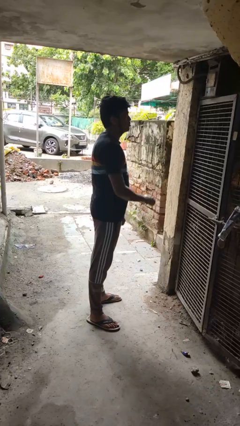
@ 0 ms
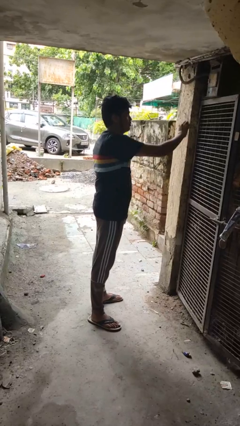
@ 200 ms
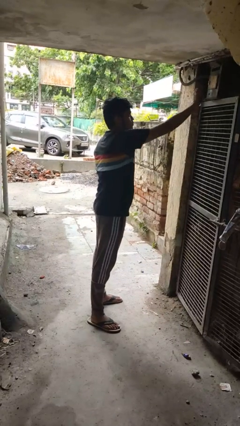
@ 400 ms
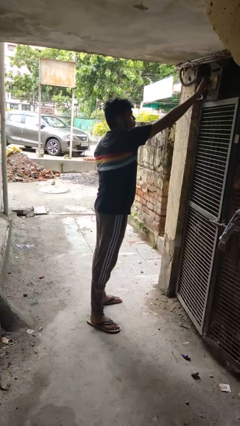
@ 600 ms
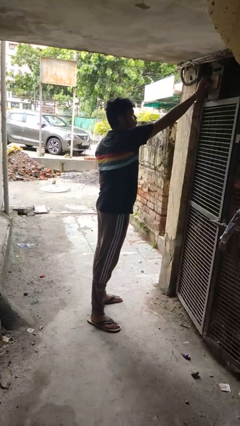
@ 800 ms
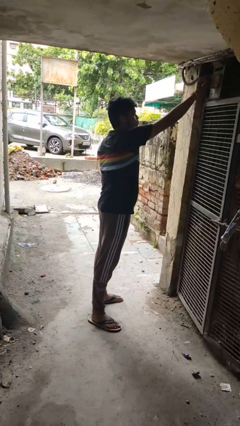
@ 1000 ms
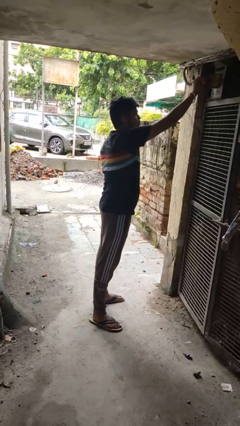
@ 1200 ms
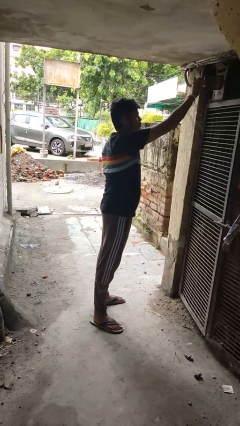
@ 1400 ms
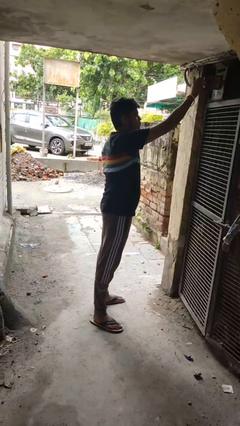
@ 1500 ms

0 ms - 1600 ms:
person opens mailbox

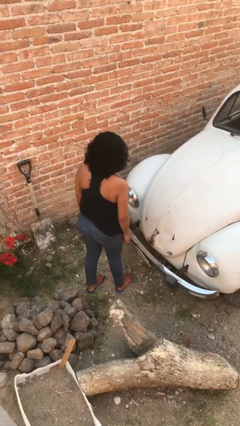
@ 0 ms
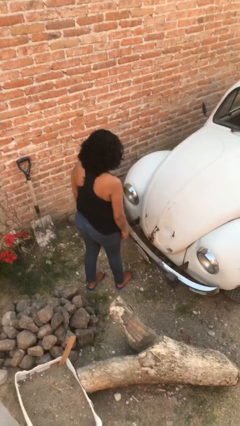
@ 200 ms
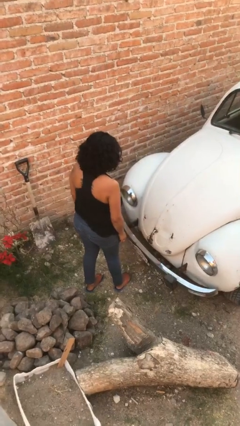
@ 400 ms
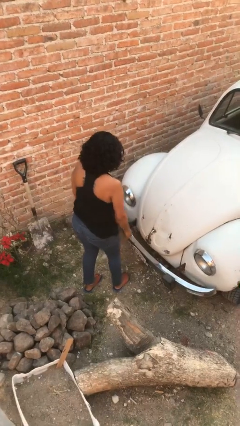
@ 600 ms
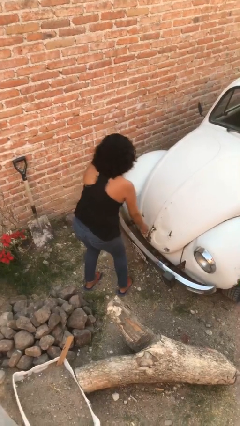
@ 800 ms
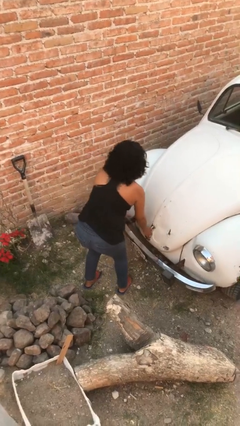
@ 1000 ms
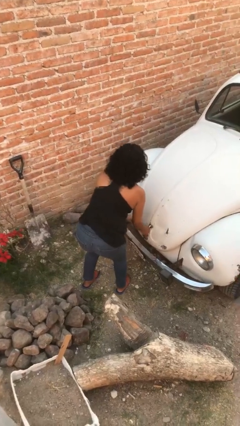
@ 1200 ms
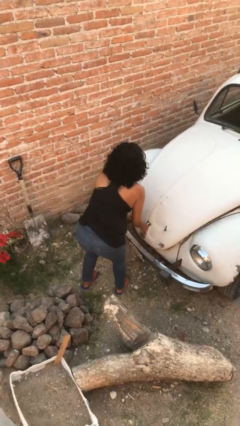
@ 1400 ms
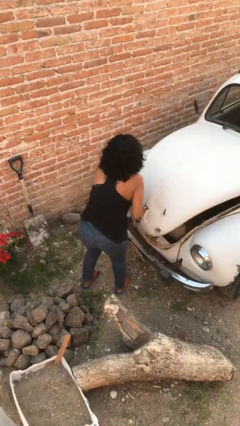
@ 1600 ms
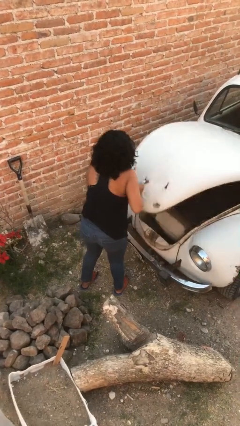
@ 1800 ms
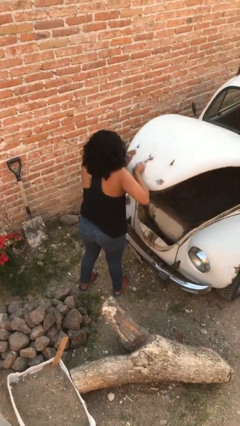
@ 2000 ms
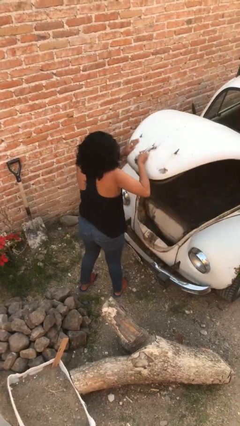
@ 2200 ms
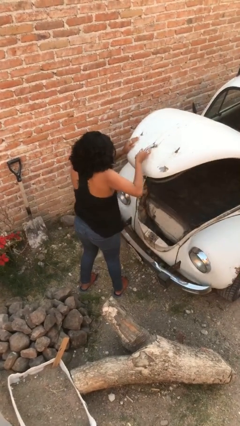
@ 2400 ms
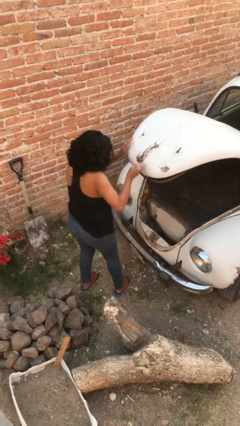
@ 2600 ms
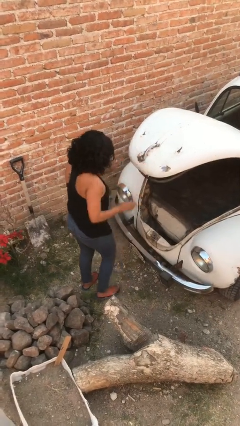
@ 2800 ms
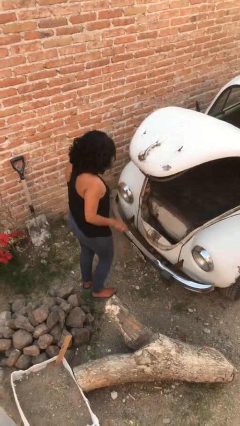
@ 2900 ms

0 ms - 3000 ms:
person opens car trunk

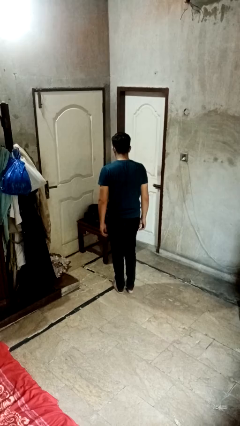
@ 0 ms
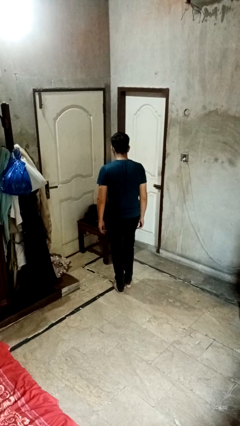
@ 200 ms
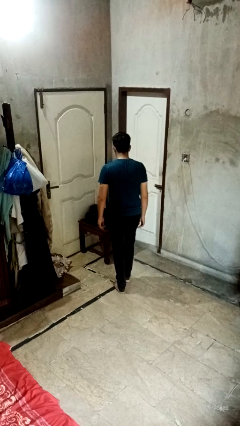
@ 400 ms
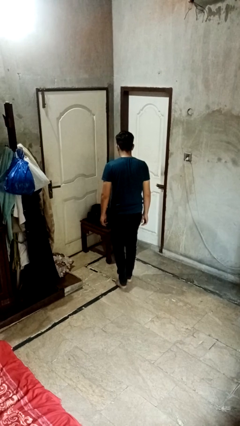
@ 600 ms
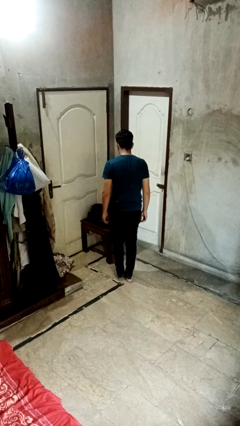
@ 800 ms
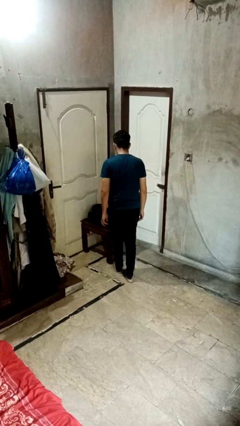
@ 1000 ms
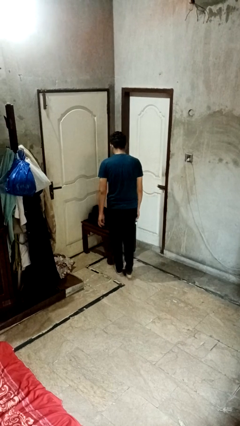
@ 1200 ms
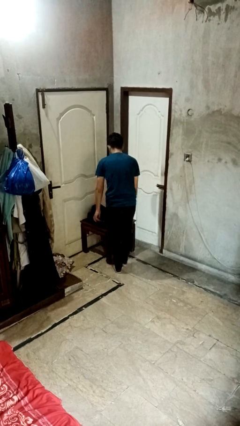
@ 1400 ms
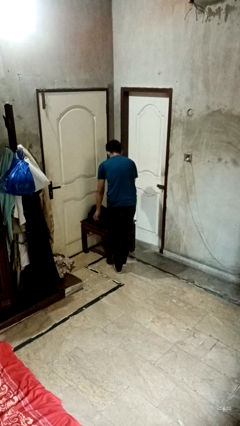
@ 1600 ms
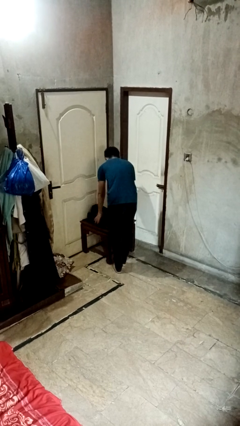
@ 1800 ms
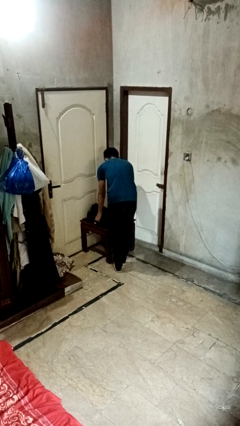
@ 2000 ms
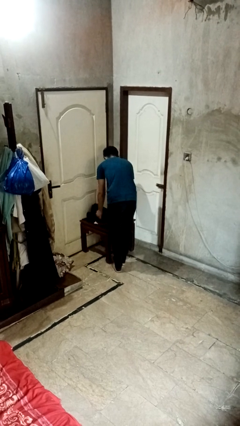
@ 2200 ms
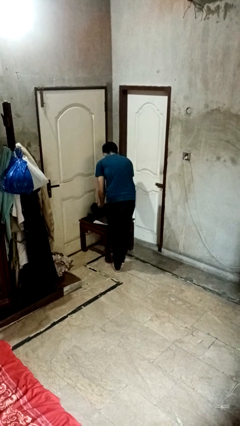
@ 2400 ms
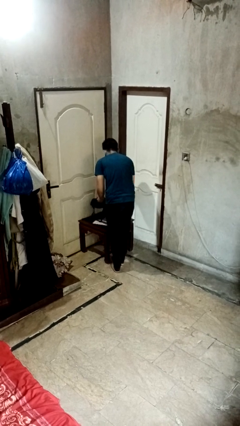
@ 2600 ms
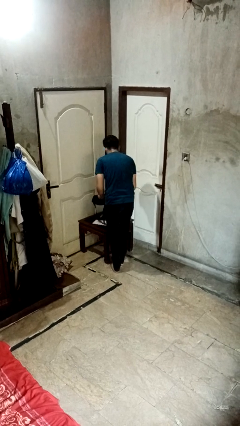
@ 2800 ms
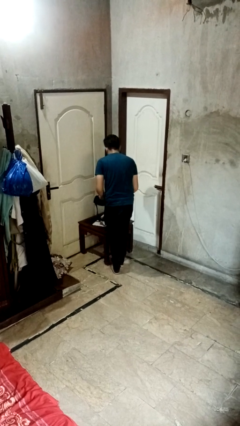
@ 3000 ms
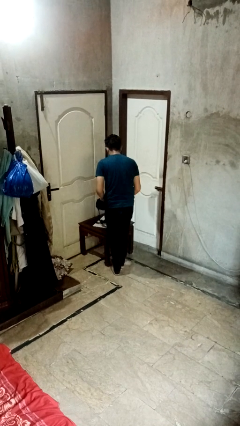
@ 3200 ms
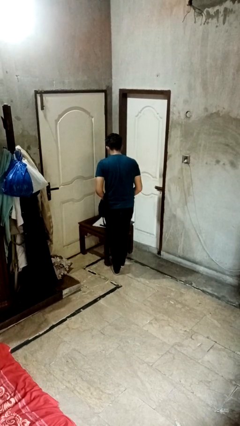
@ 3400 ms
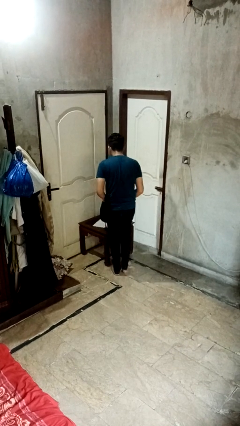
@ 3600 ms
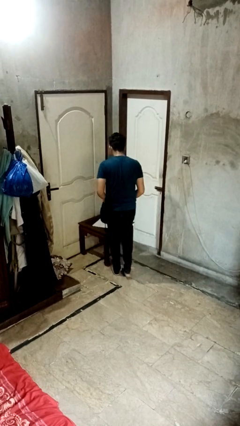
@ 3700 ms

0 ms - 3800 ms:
person picks up object from table

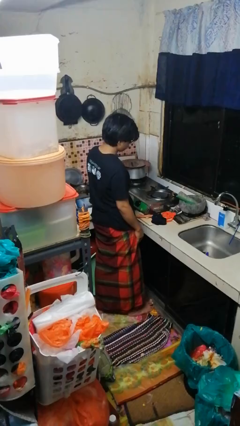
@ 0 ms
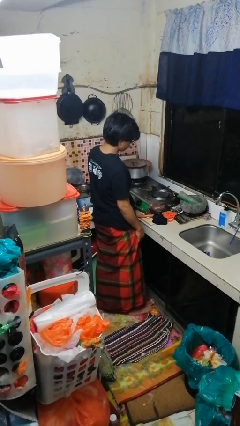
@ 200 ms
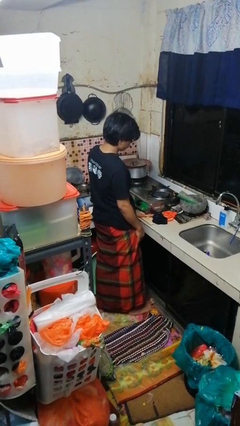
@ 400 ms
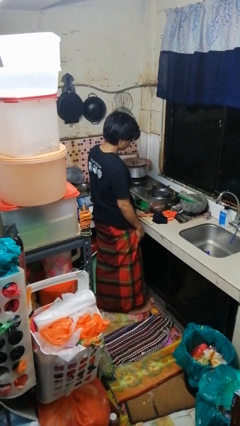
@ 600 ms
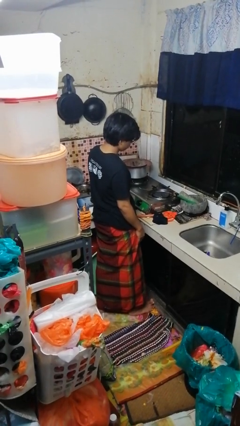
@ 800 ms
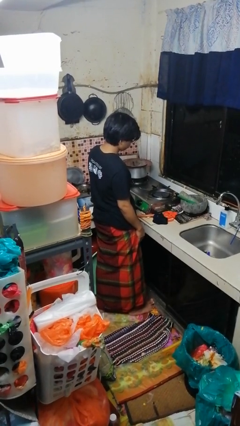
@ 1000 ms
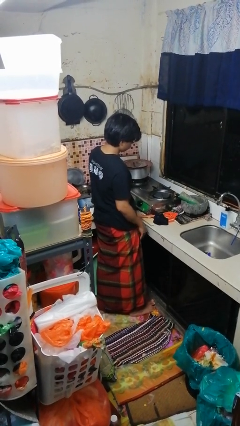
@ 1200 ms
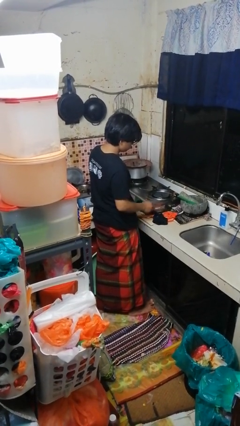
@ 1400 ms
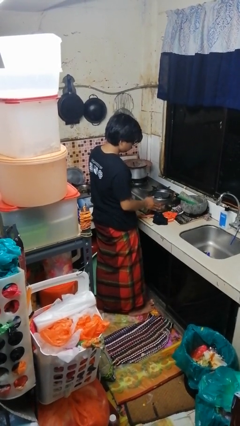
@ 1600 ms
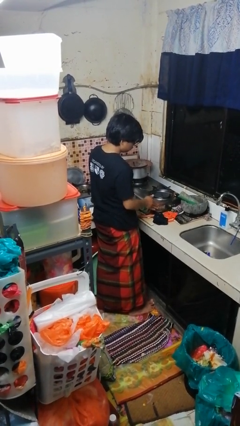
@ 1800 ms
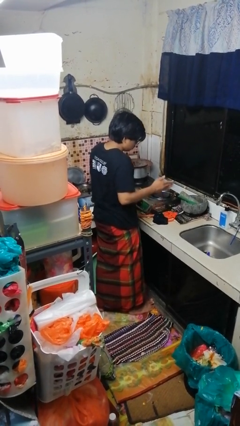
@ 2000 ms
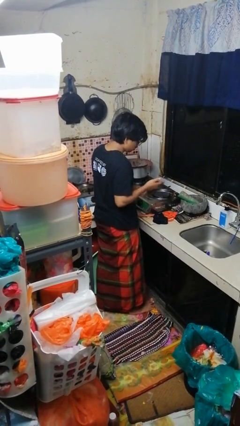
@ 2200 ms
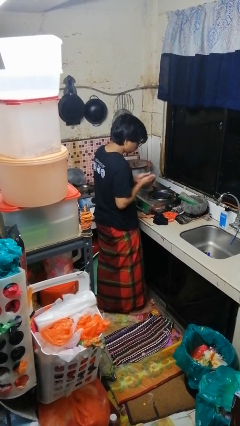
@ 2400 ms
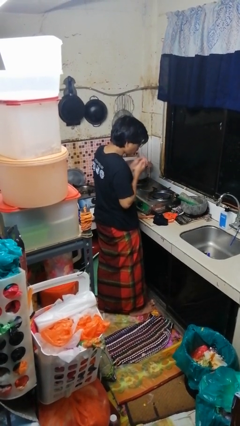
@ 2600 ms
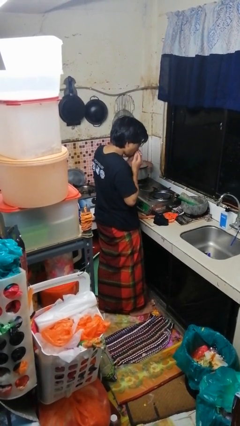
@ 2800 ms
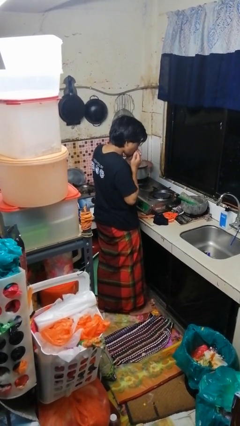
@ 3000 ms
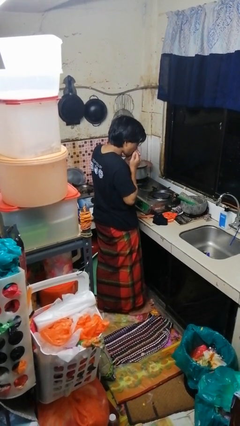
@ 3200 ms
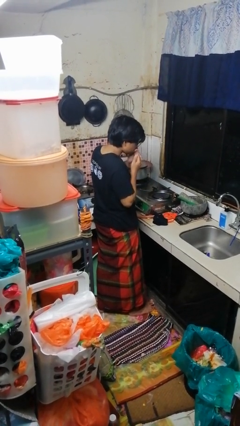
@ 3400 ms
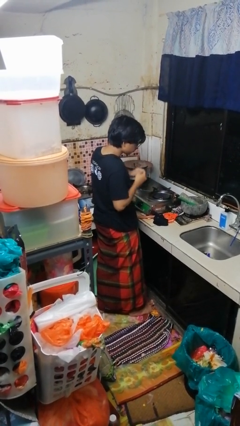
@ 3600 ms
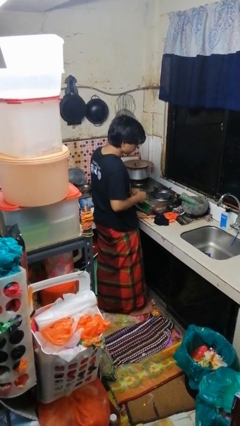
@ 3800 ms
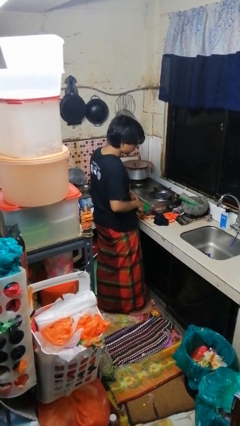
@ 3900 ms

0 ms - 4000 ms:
person burns hand

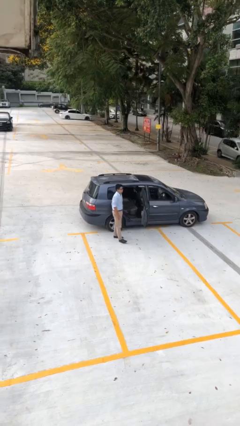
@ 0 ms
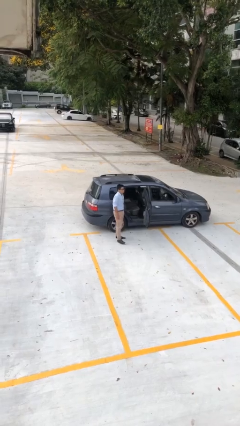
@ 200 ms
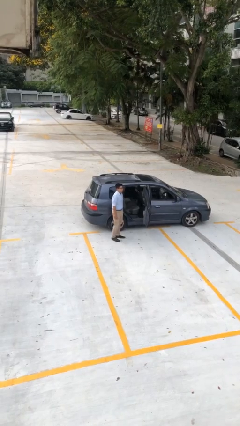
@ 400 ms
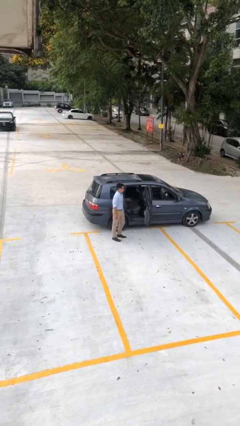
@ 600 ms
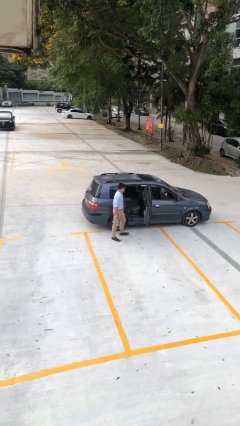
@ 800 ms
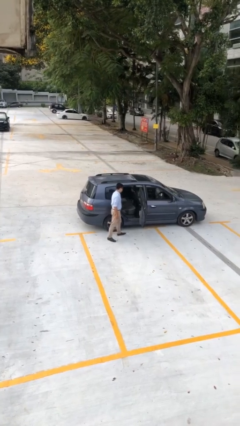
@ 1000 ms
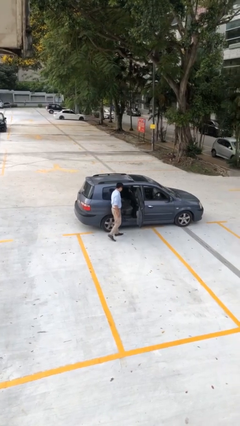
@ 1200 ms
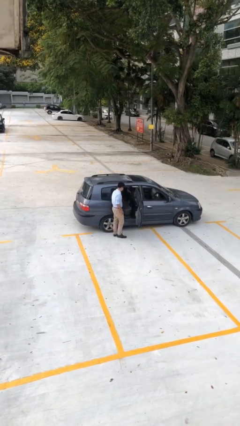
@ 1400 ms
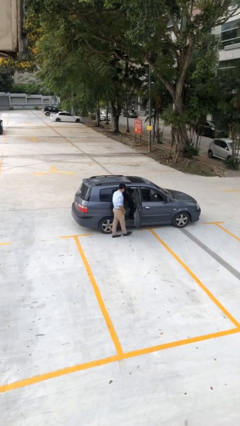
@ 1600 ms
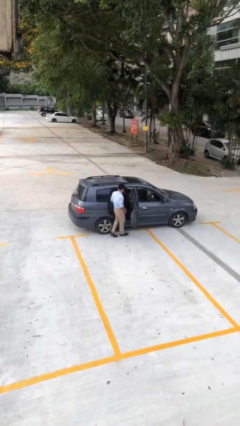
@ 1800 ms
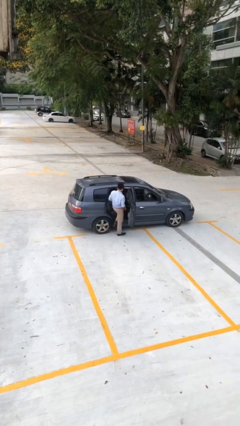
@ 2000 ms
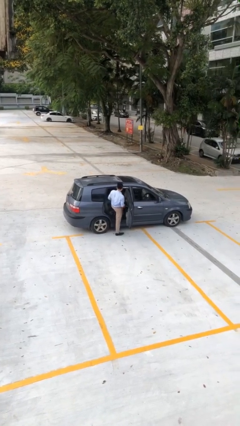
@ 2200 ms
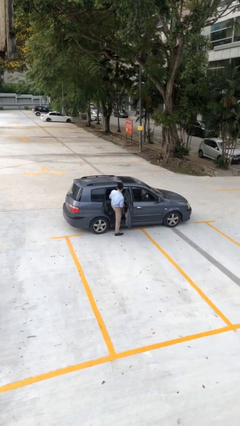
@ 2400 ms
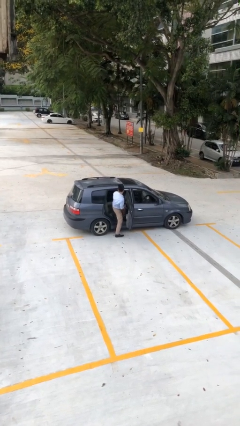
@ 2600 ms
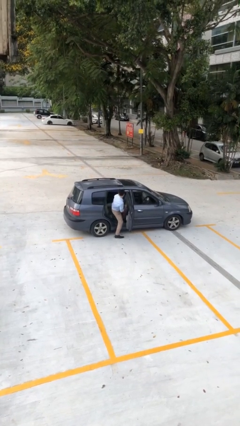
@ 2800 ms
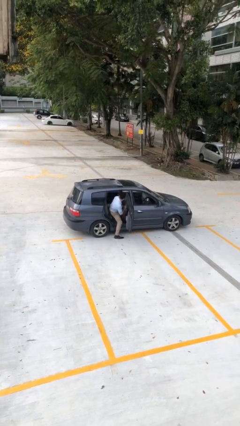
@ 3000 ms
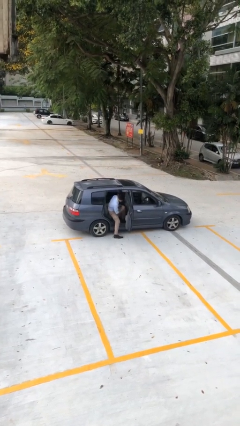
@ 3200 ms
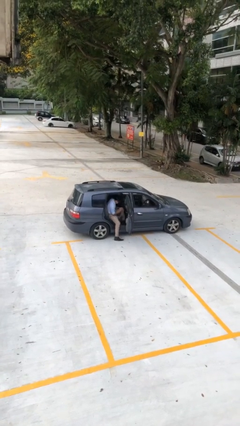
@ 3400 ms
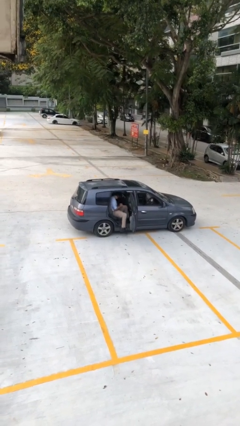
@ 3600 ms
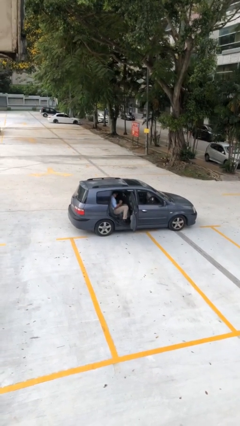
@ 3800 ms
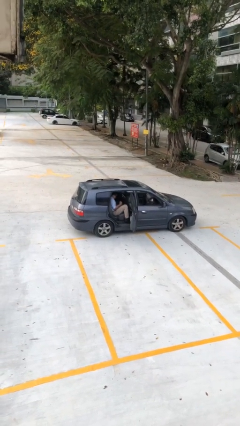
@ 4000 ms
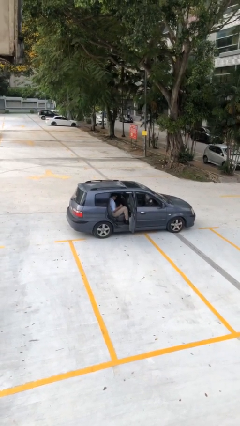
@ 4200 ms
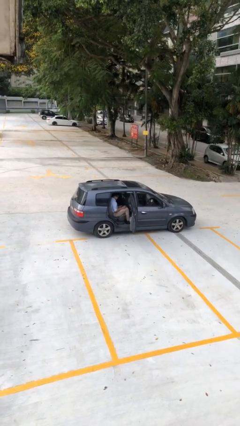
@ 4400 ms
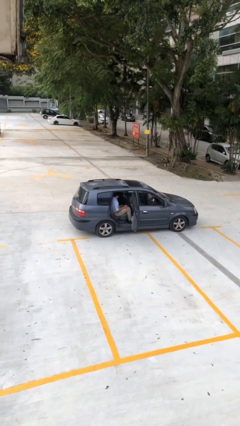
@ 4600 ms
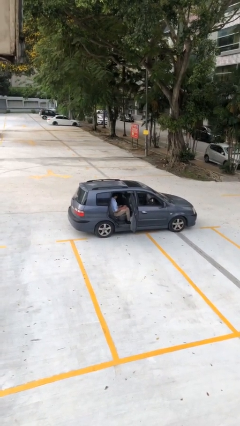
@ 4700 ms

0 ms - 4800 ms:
person enters car
